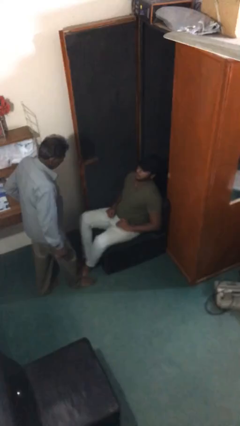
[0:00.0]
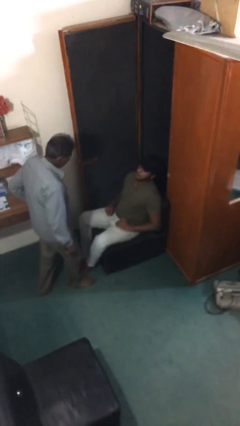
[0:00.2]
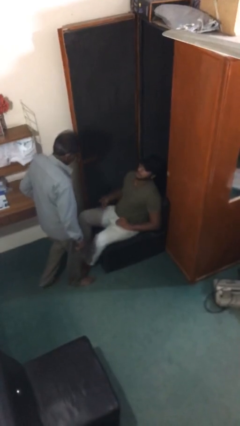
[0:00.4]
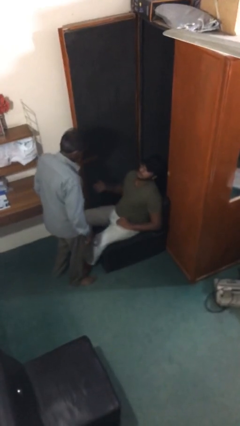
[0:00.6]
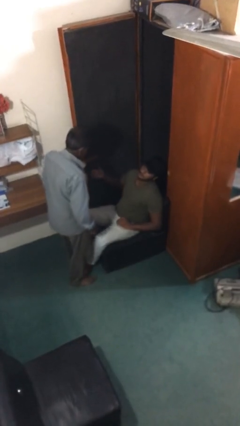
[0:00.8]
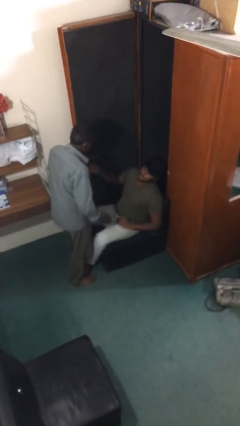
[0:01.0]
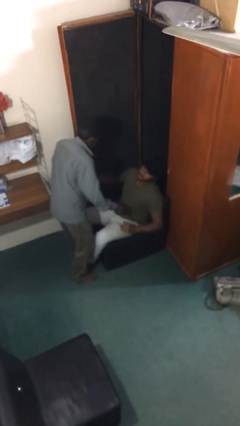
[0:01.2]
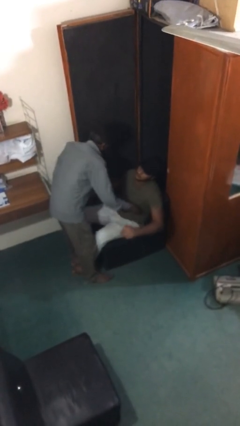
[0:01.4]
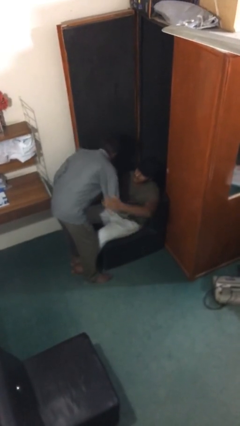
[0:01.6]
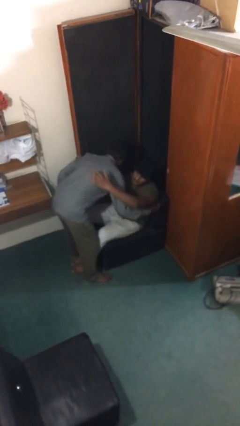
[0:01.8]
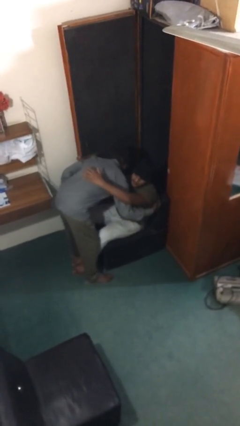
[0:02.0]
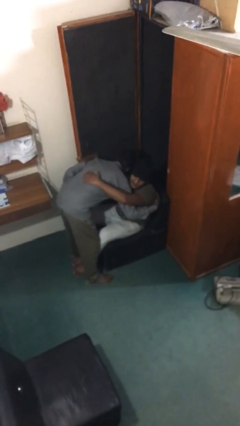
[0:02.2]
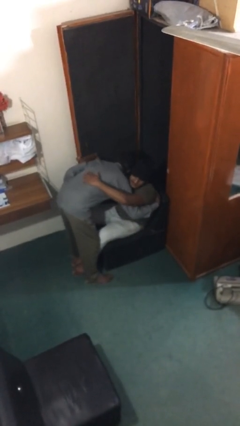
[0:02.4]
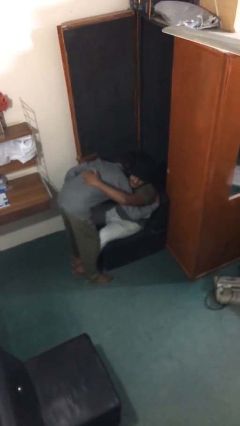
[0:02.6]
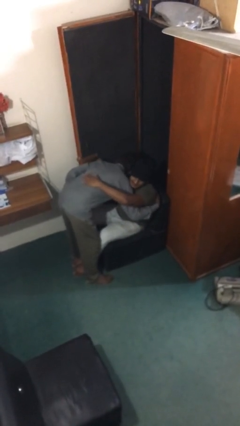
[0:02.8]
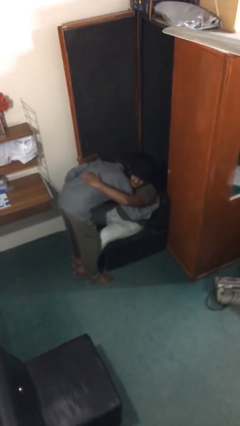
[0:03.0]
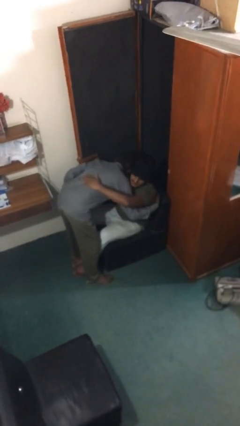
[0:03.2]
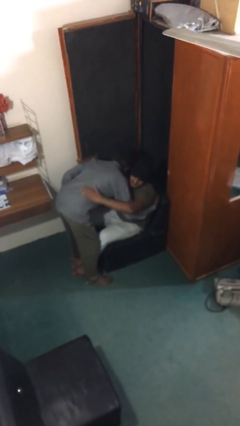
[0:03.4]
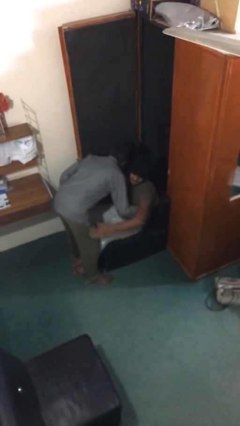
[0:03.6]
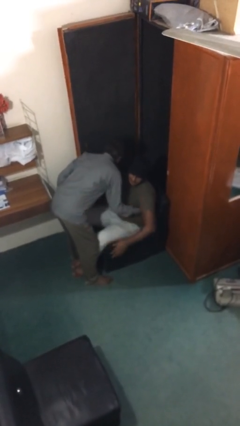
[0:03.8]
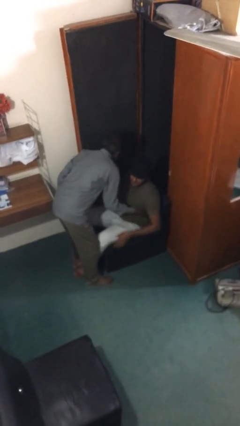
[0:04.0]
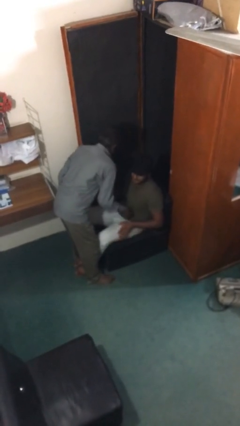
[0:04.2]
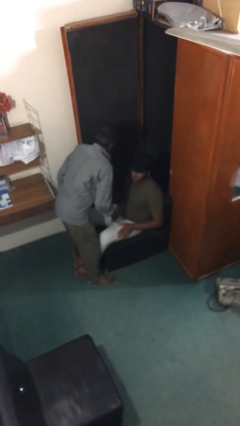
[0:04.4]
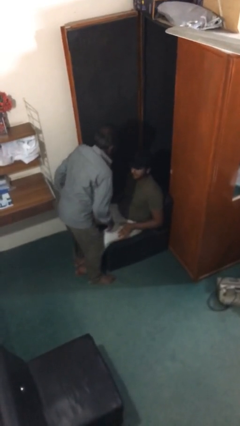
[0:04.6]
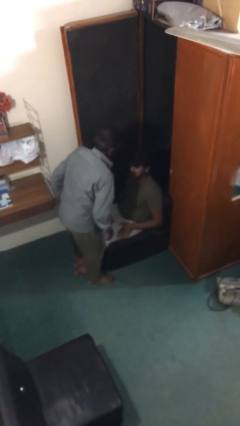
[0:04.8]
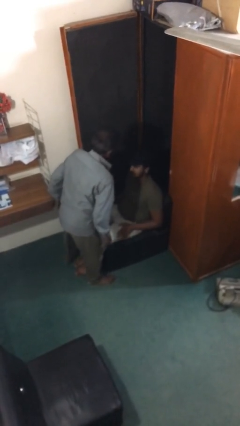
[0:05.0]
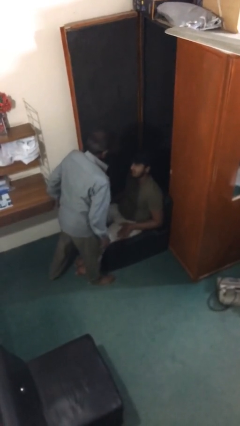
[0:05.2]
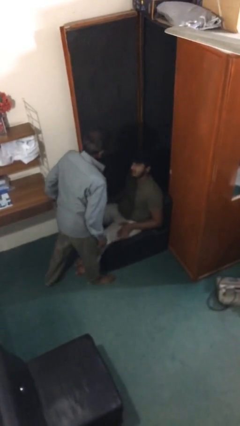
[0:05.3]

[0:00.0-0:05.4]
person embraces person

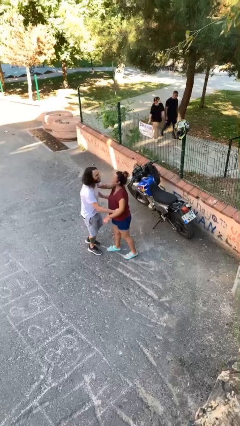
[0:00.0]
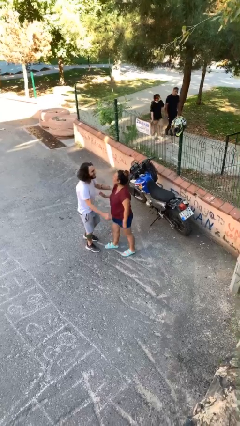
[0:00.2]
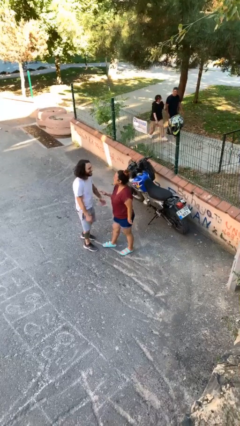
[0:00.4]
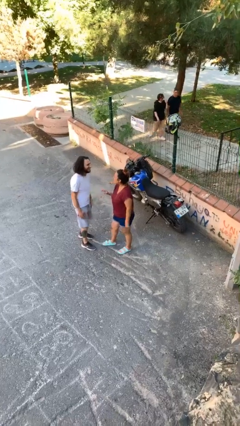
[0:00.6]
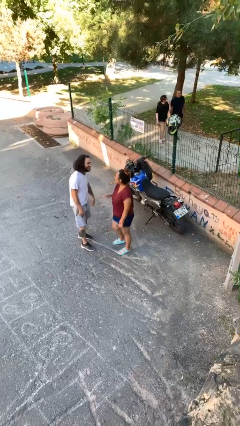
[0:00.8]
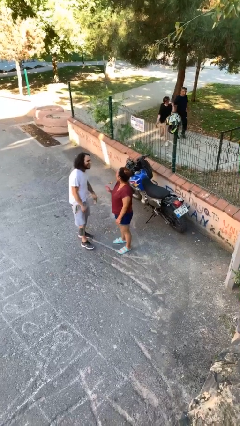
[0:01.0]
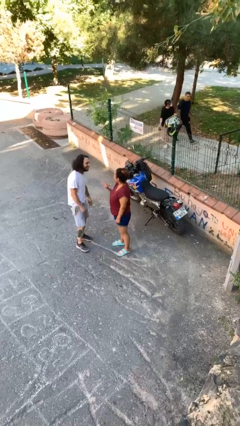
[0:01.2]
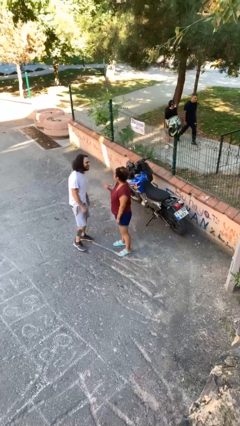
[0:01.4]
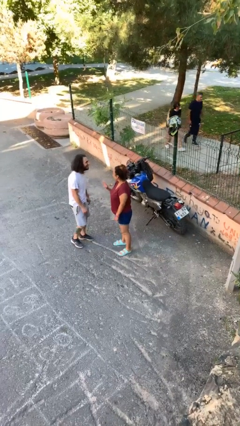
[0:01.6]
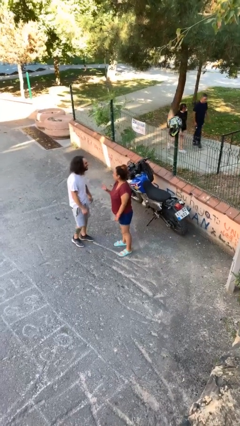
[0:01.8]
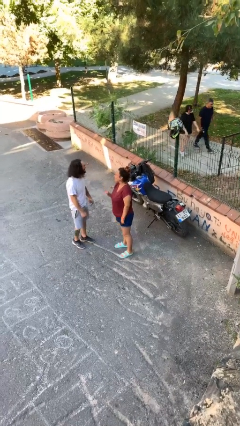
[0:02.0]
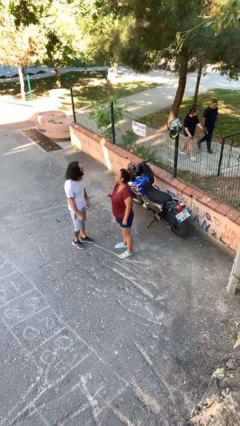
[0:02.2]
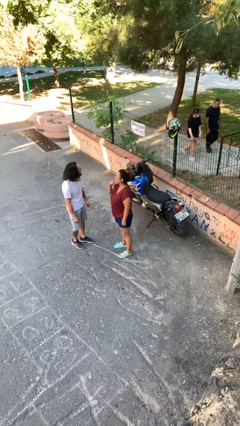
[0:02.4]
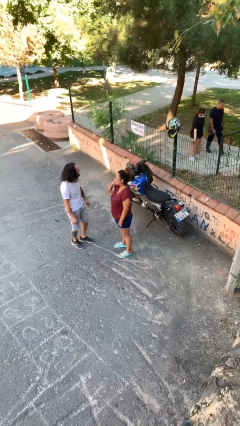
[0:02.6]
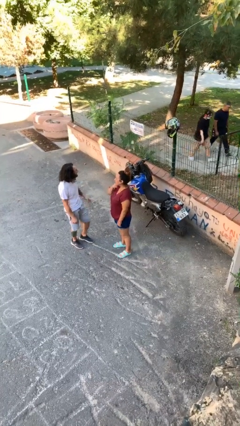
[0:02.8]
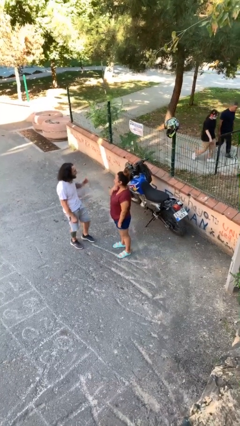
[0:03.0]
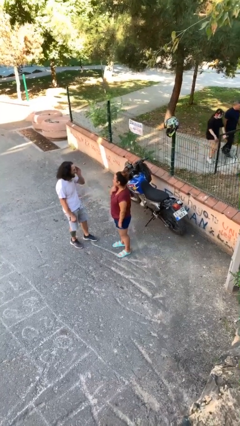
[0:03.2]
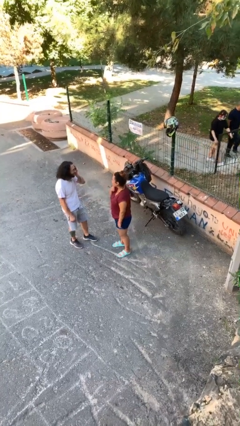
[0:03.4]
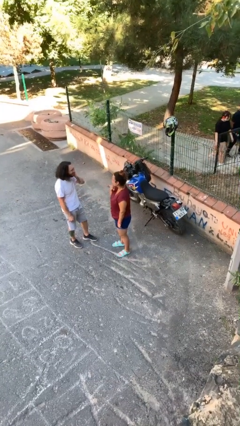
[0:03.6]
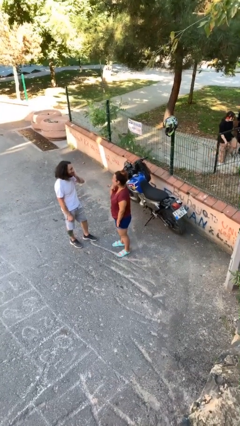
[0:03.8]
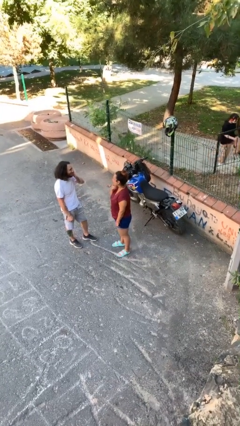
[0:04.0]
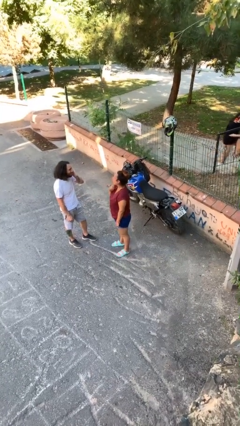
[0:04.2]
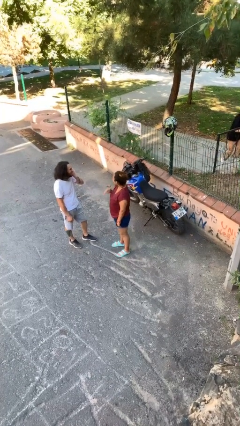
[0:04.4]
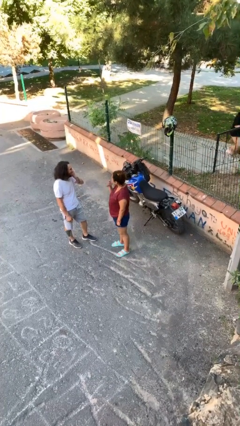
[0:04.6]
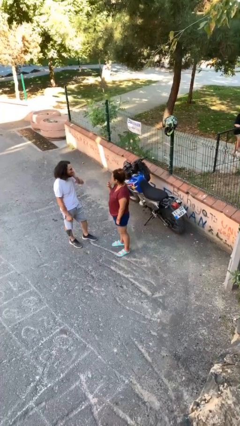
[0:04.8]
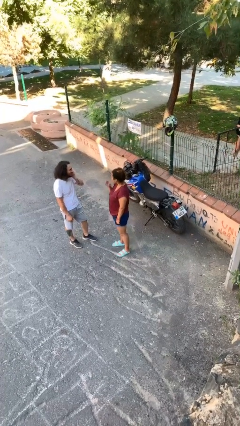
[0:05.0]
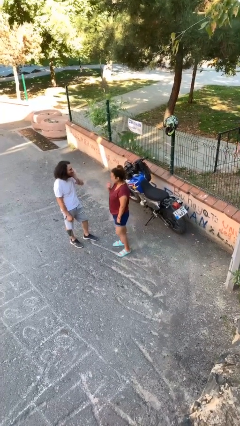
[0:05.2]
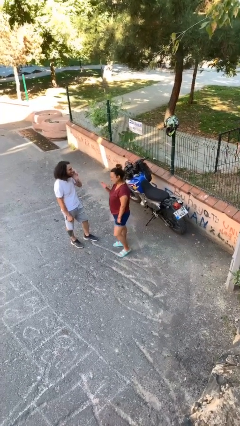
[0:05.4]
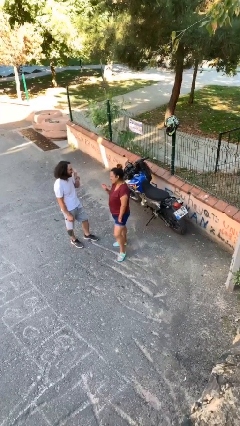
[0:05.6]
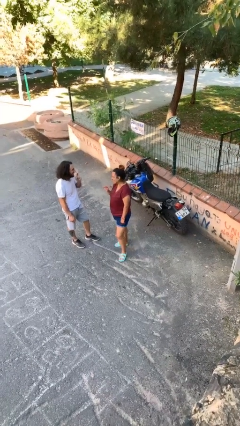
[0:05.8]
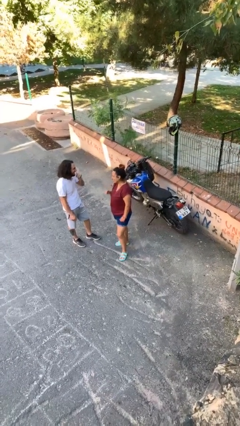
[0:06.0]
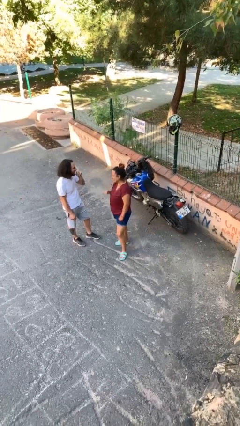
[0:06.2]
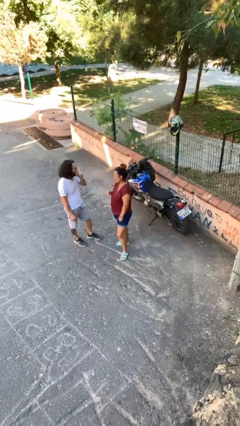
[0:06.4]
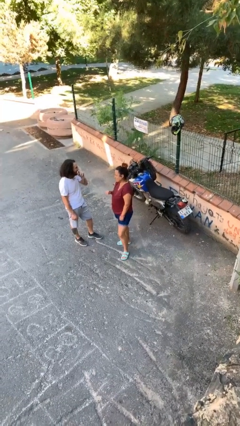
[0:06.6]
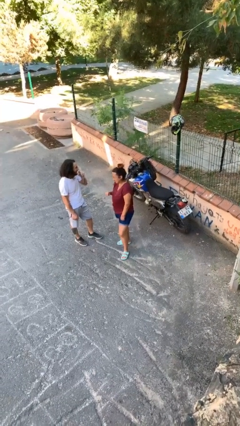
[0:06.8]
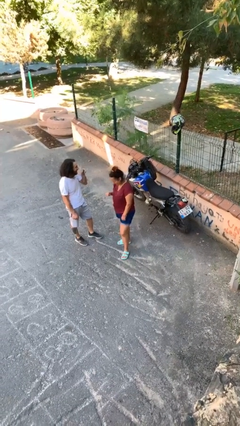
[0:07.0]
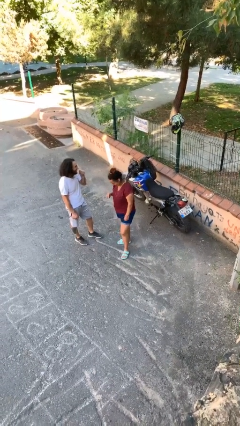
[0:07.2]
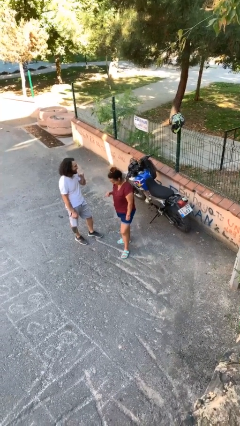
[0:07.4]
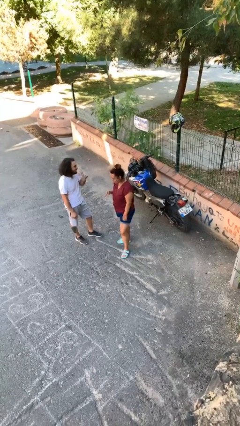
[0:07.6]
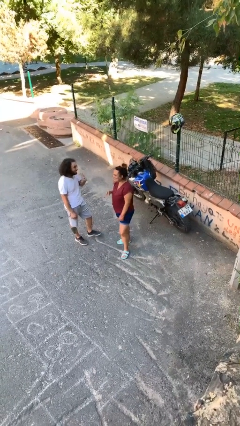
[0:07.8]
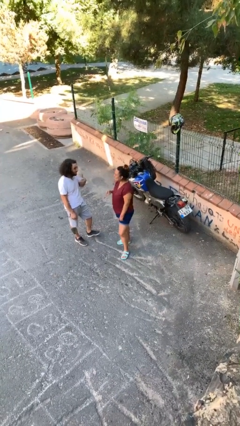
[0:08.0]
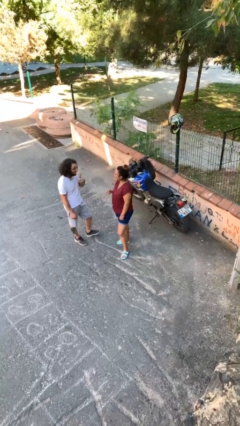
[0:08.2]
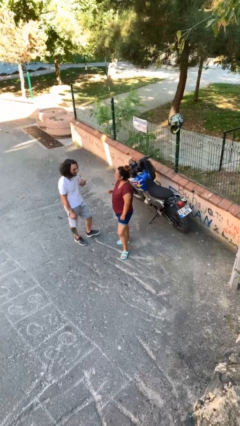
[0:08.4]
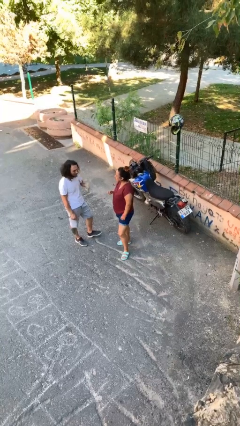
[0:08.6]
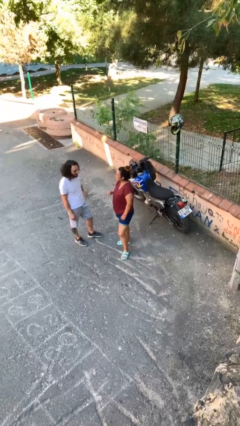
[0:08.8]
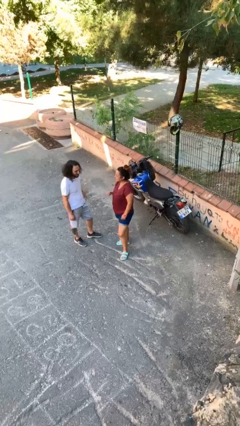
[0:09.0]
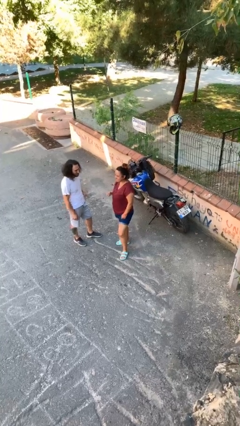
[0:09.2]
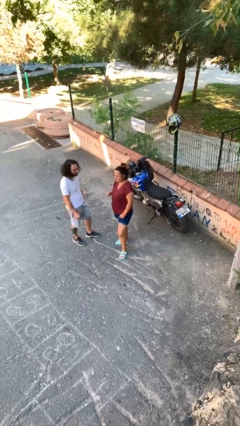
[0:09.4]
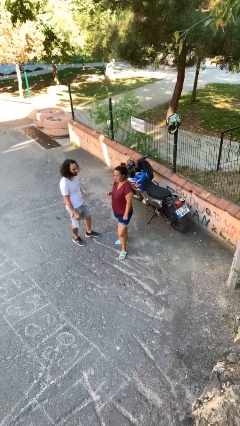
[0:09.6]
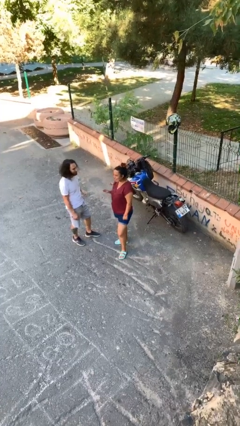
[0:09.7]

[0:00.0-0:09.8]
person talks to person

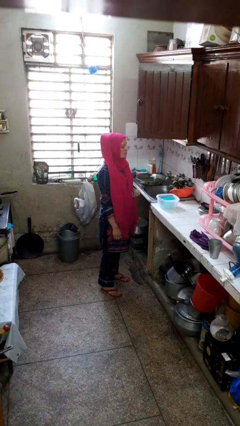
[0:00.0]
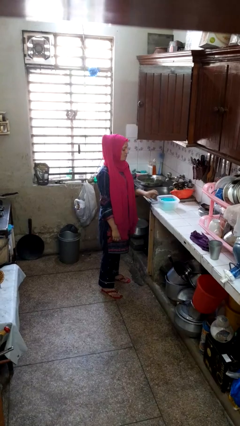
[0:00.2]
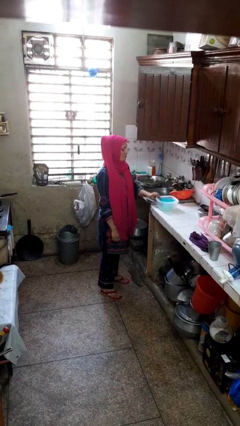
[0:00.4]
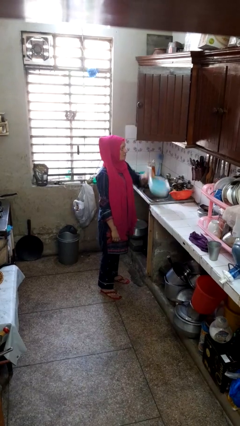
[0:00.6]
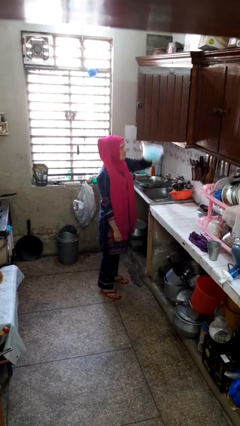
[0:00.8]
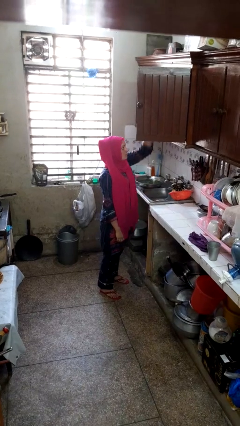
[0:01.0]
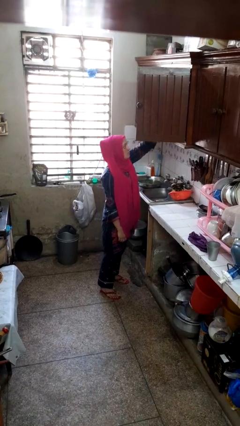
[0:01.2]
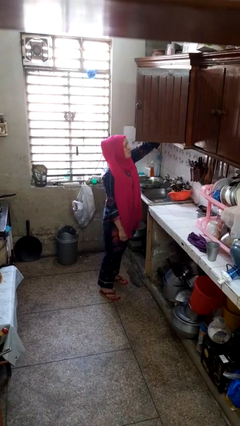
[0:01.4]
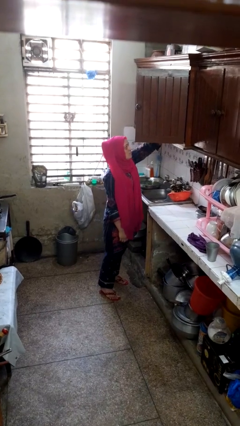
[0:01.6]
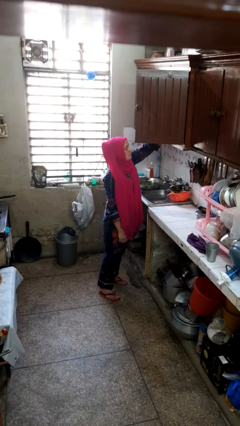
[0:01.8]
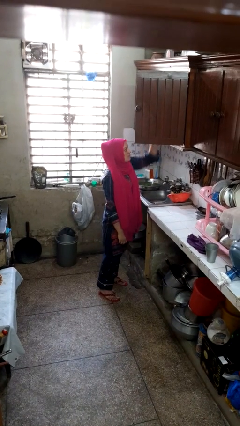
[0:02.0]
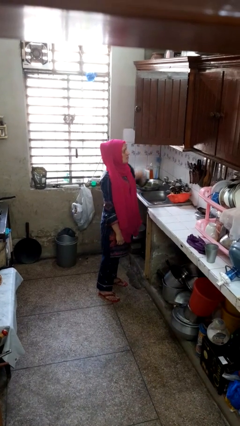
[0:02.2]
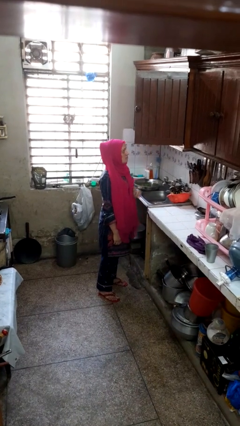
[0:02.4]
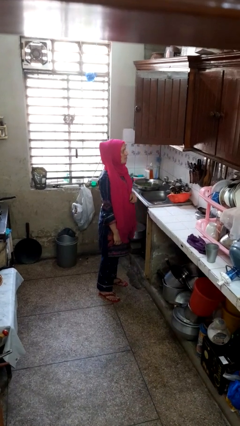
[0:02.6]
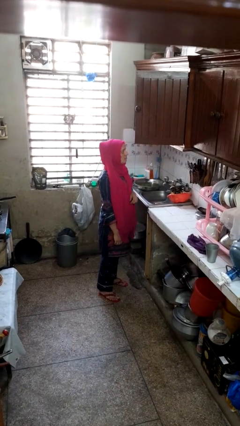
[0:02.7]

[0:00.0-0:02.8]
person puts object in cabinet

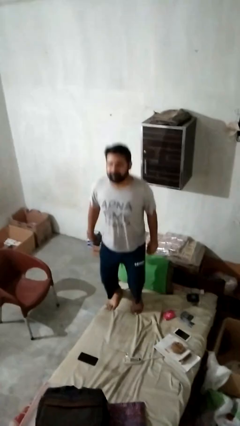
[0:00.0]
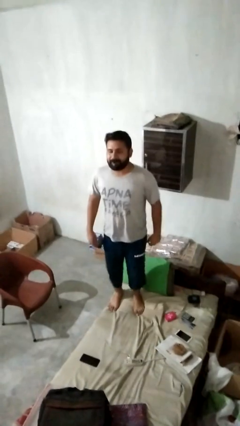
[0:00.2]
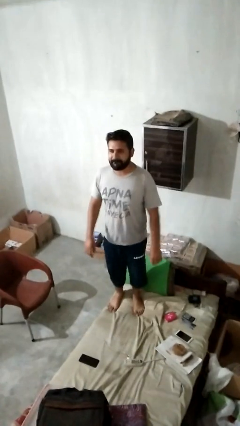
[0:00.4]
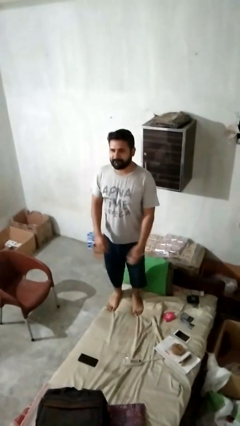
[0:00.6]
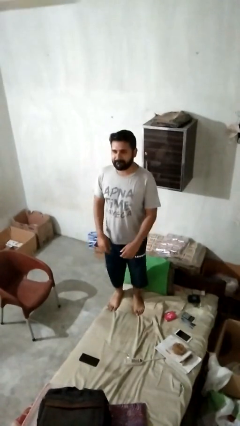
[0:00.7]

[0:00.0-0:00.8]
person jumps on bed
